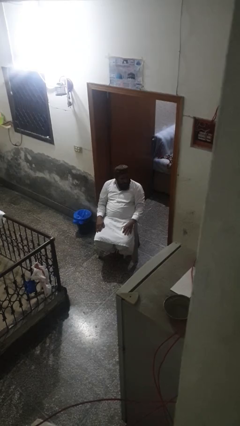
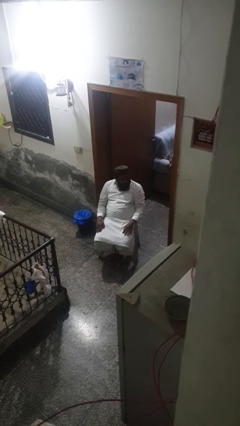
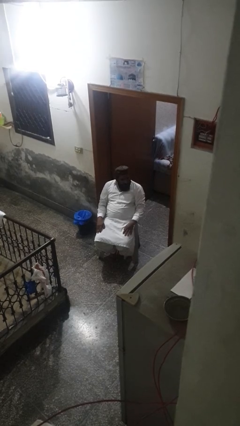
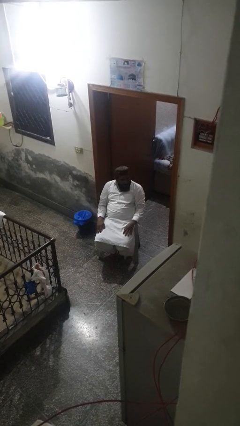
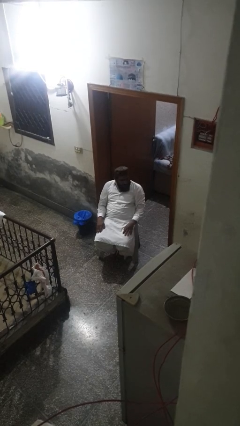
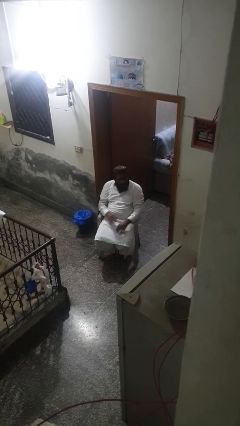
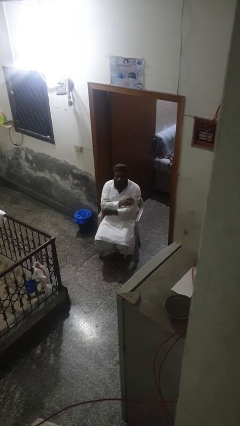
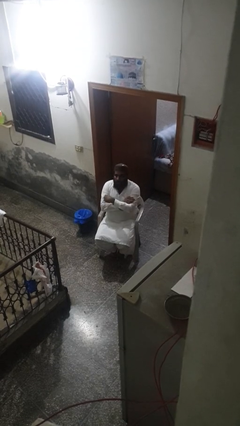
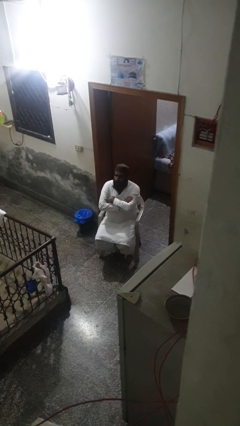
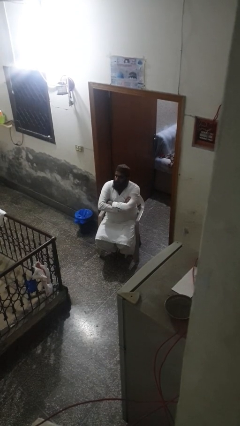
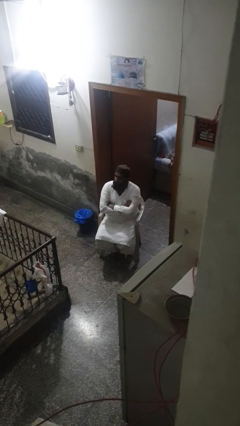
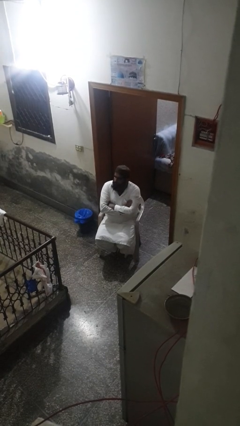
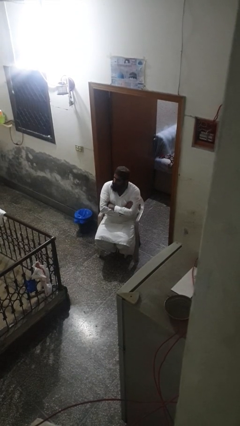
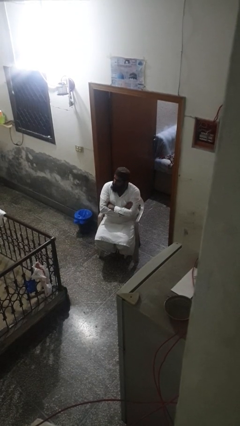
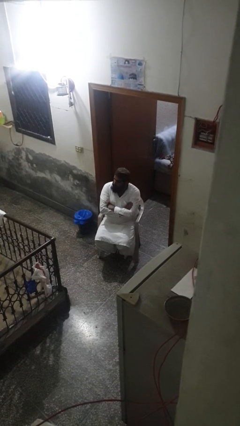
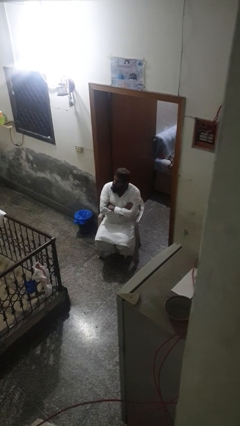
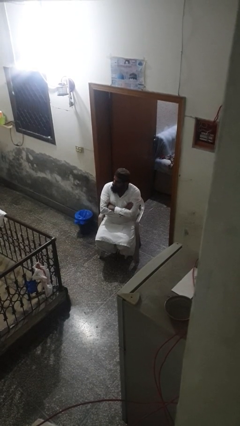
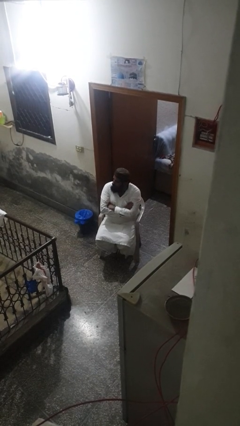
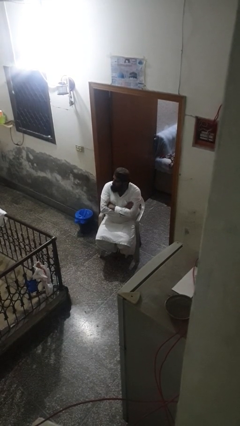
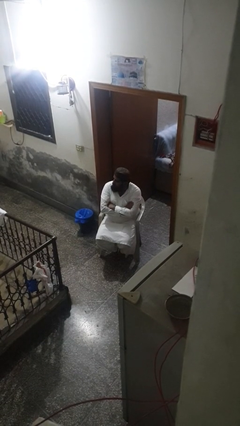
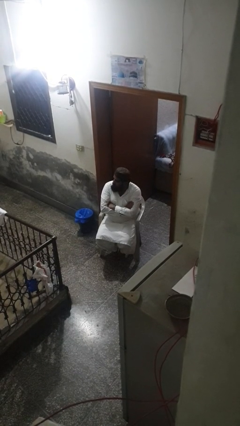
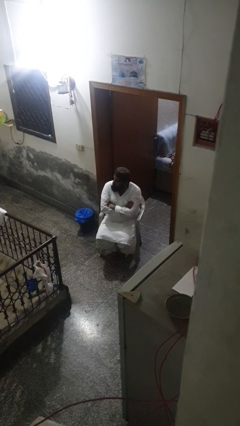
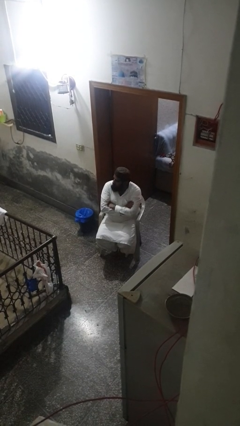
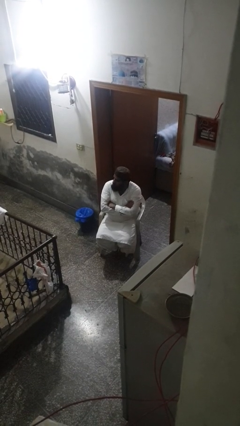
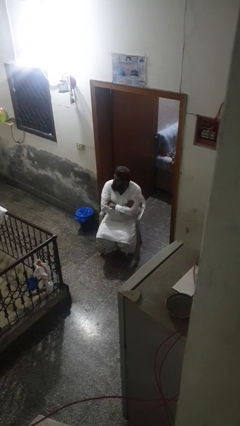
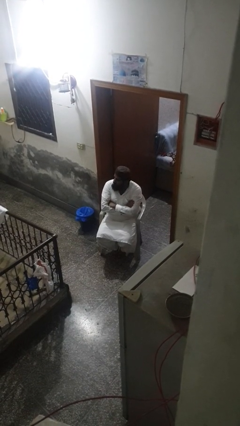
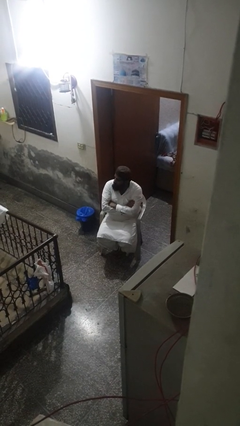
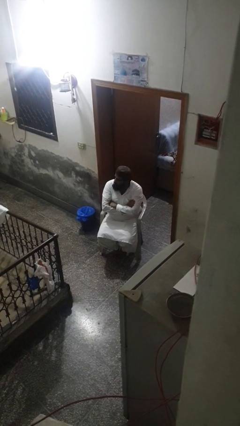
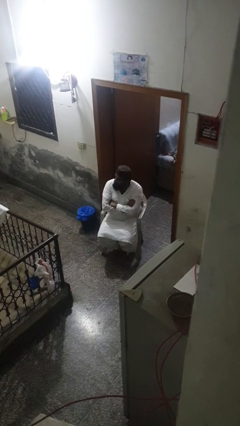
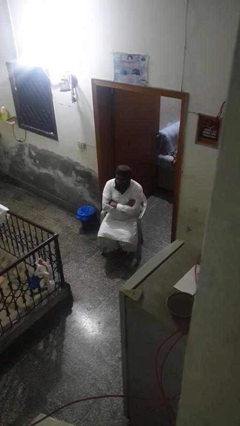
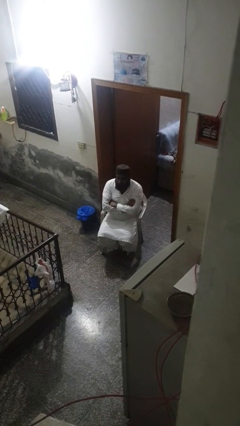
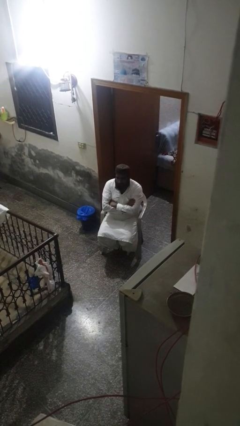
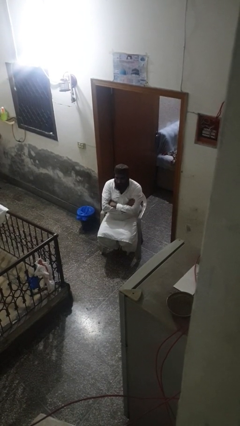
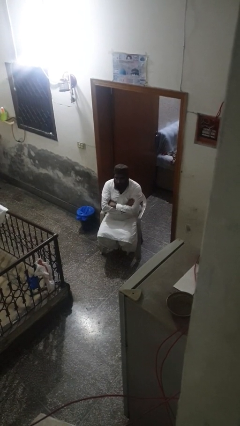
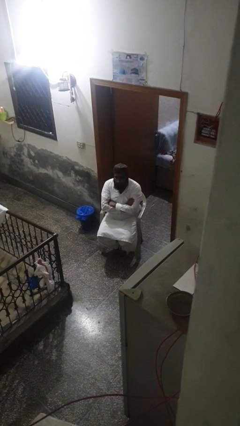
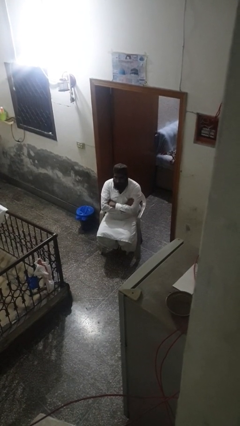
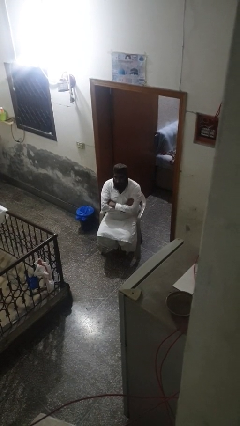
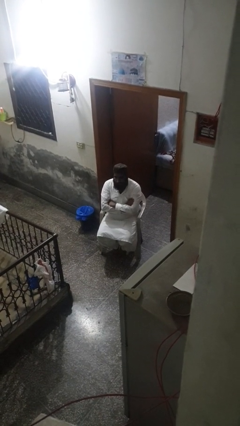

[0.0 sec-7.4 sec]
person crosses arms

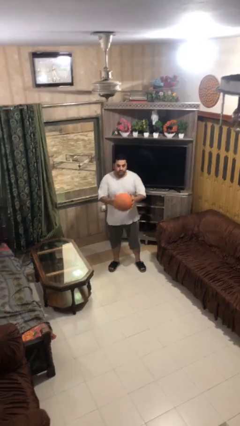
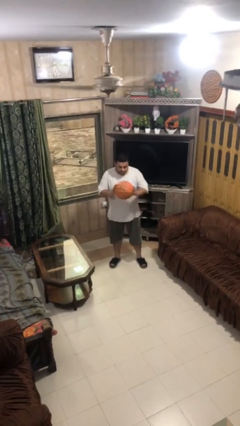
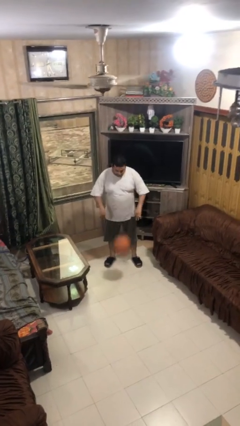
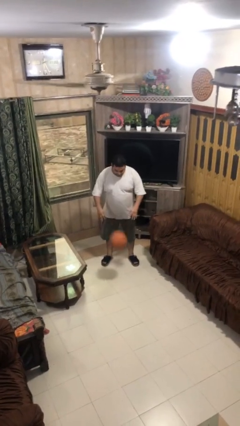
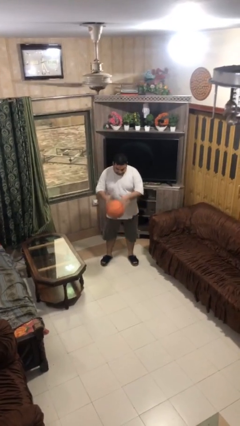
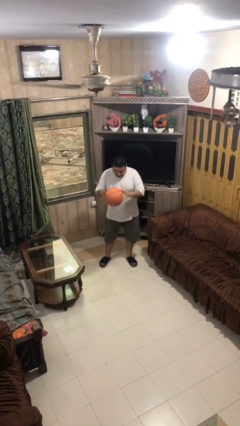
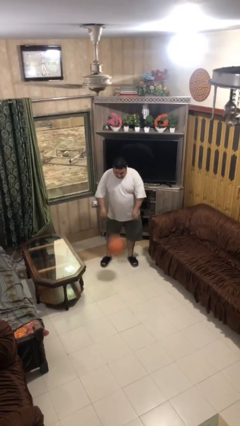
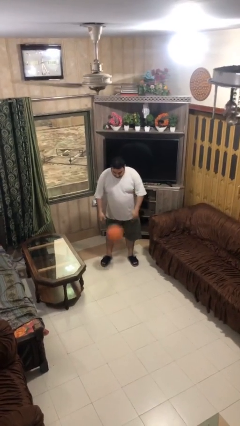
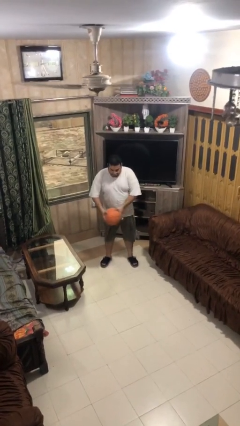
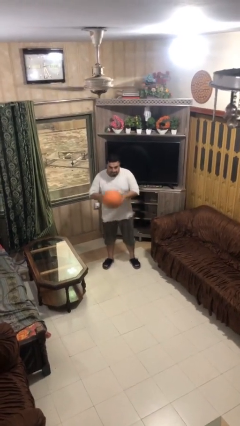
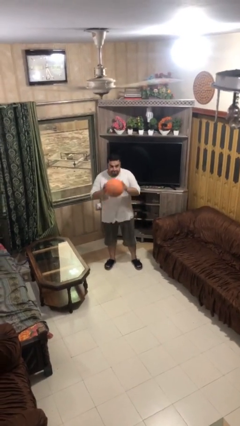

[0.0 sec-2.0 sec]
person bounces ball on floor

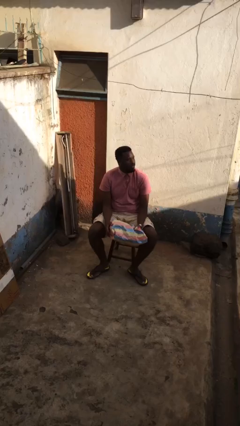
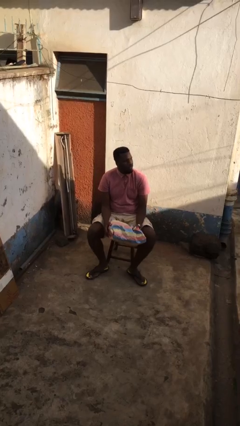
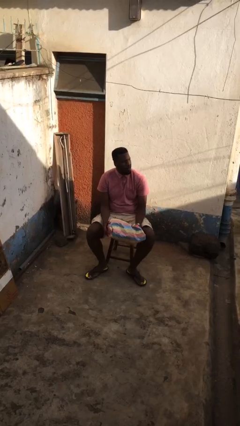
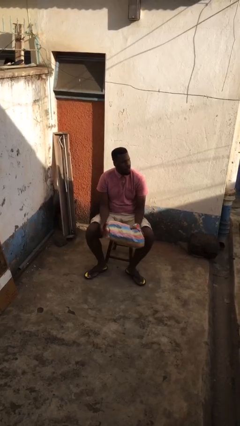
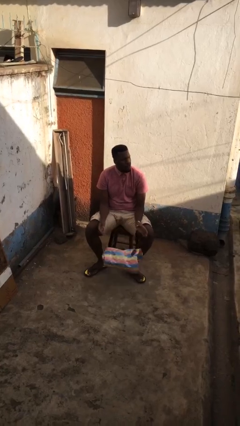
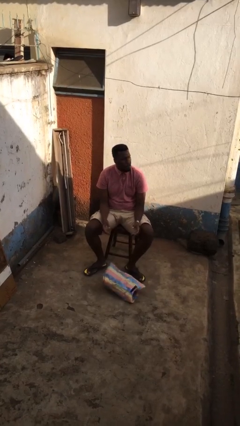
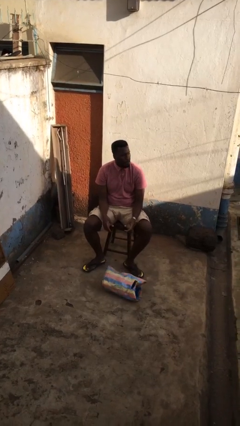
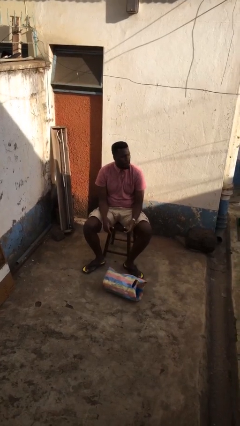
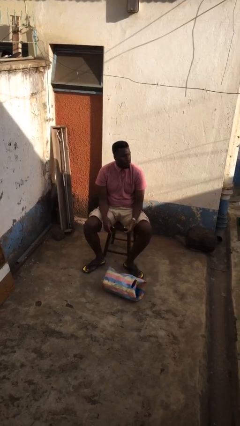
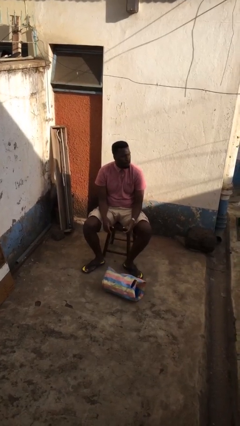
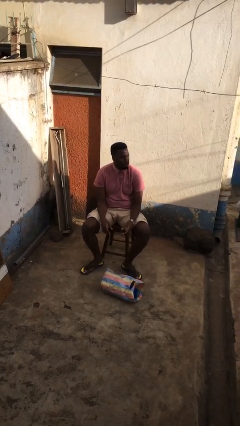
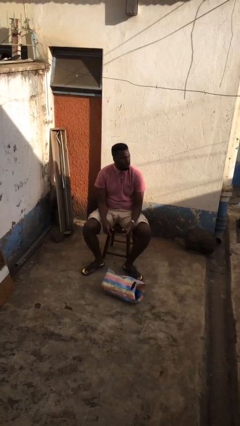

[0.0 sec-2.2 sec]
person drops object

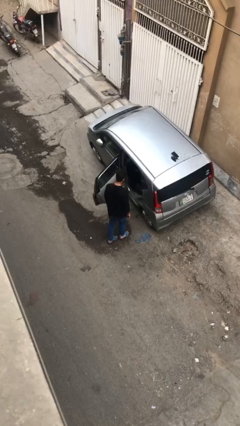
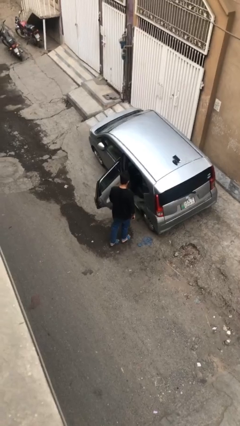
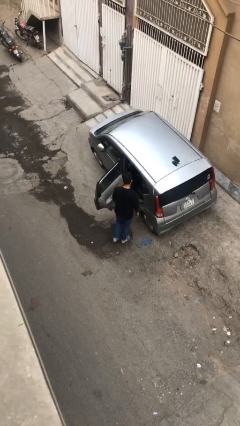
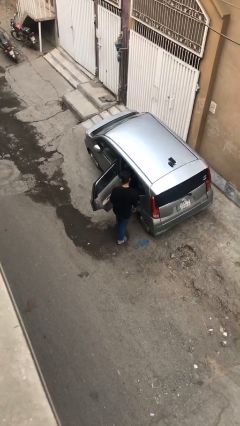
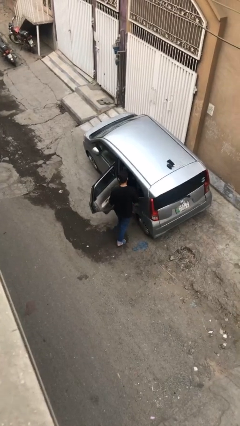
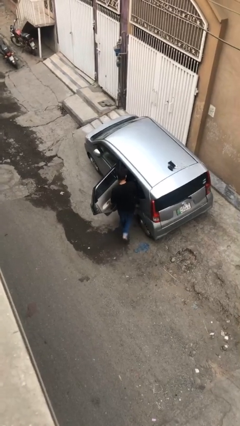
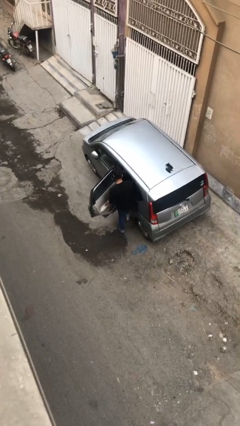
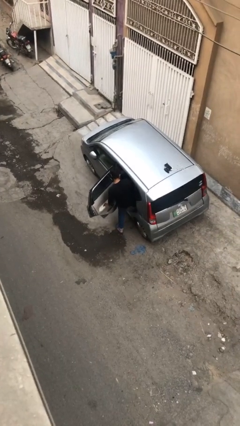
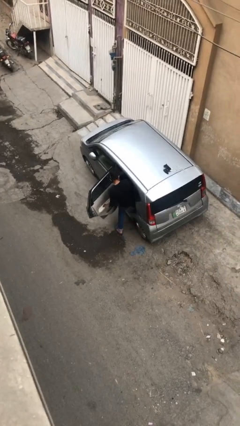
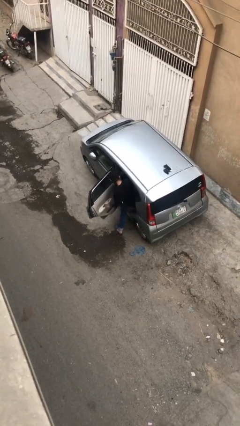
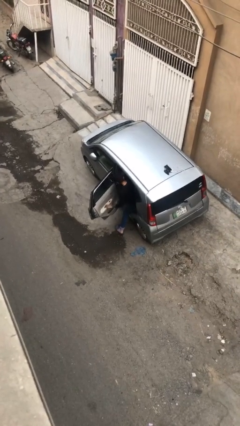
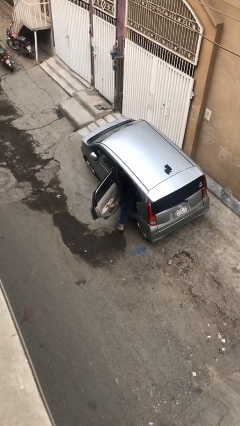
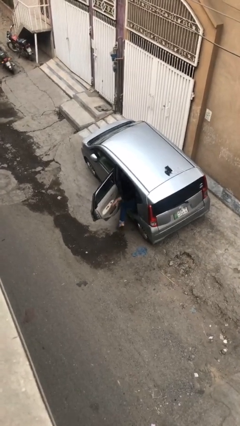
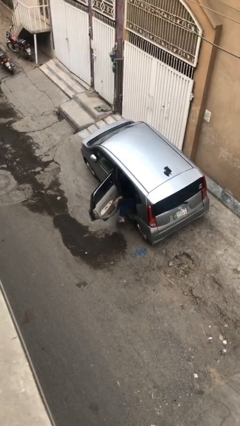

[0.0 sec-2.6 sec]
person enters car

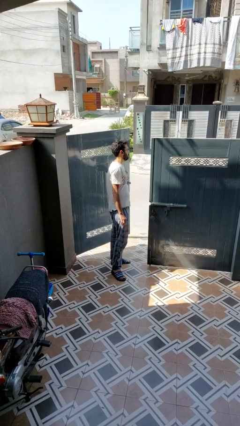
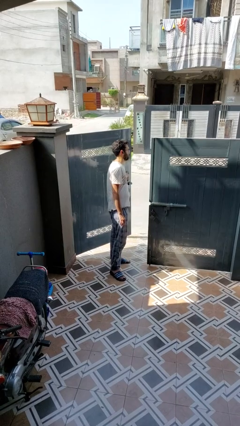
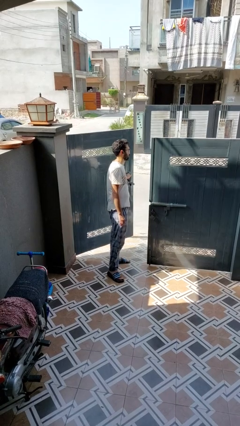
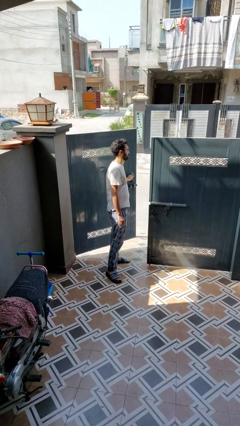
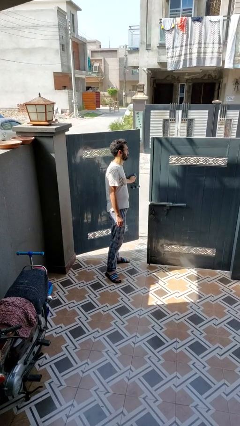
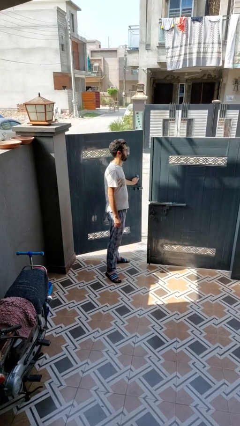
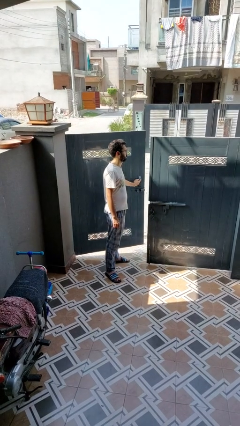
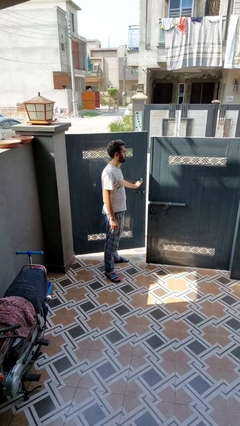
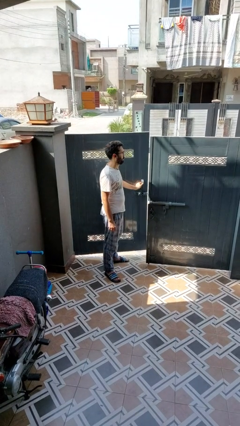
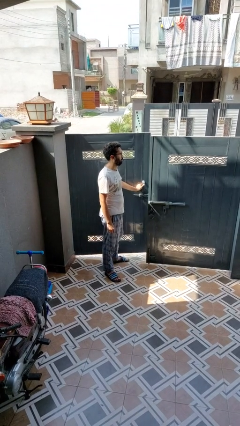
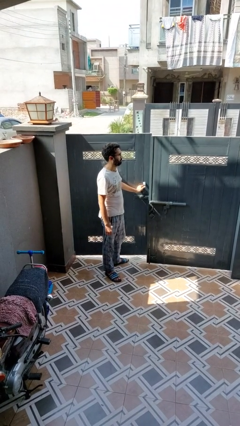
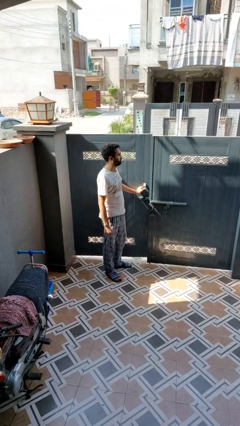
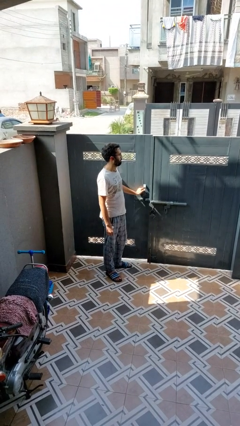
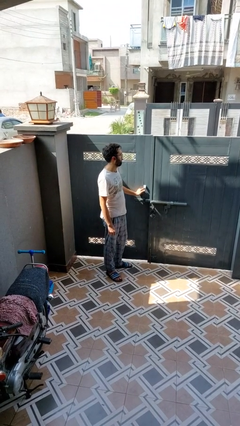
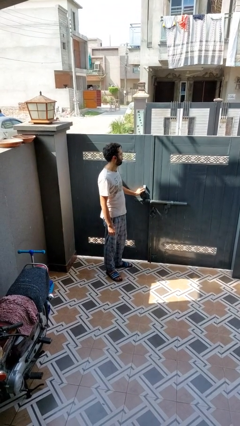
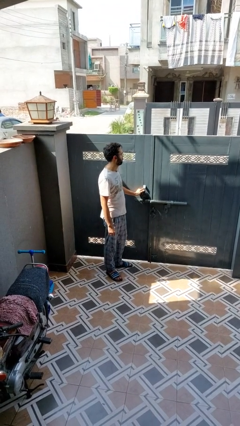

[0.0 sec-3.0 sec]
person closes gate
